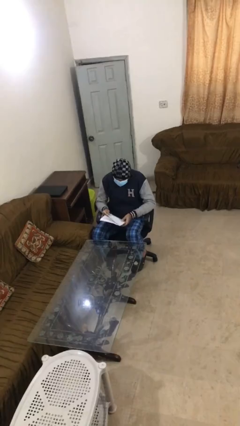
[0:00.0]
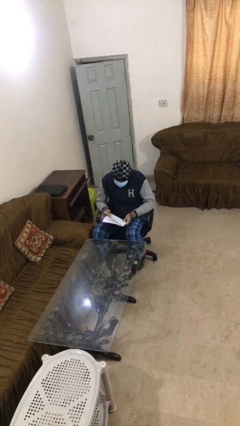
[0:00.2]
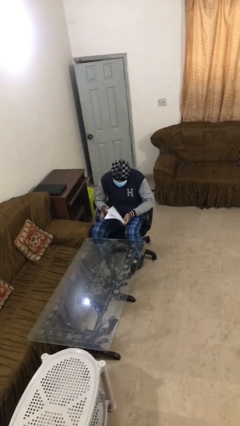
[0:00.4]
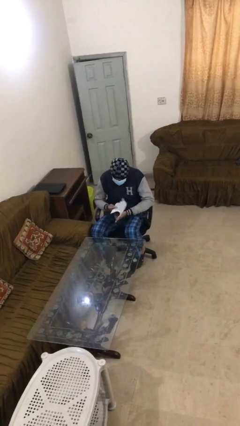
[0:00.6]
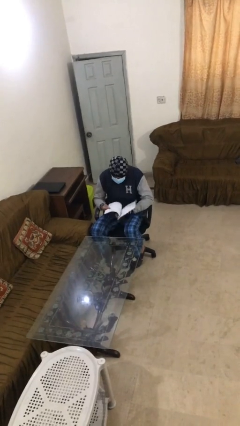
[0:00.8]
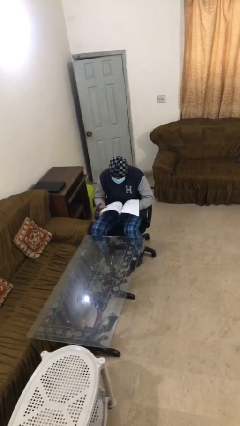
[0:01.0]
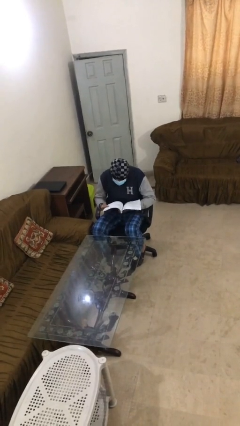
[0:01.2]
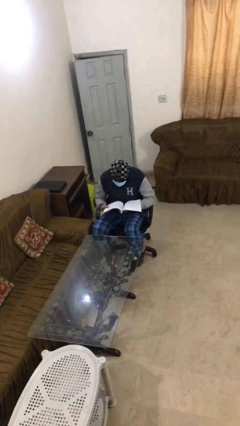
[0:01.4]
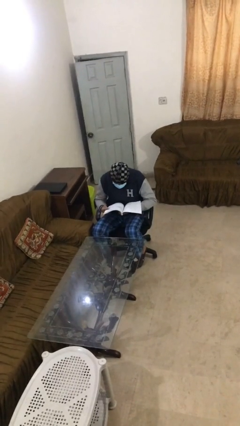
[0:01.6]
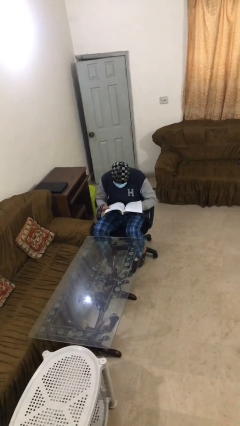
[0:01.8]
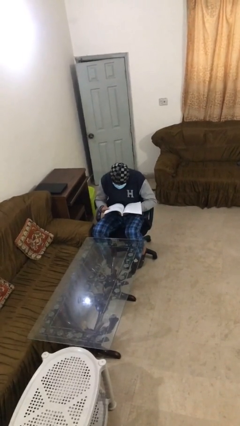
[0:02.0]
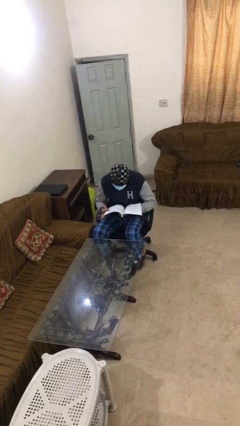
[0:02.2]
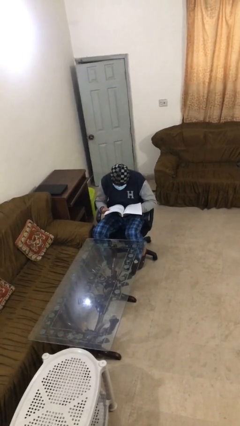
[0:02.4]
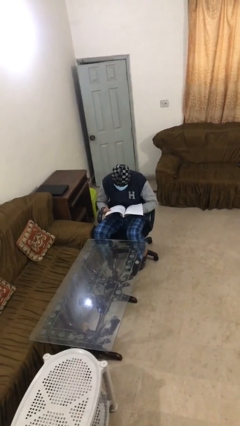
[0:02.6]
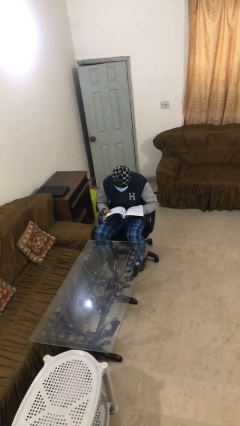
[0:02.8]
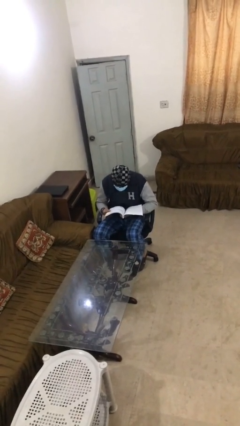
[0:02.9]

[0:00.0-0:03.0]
person reads document

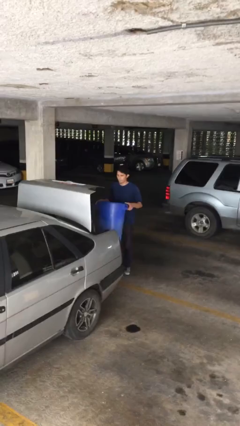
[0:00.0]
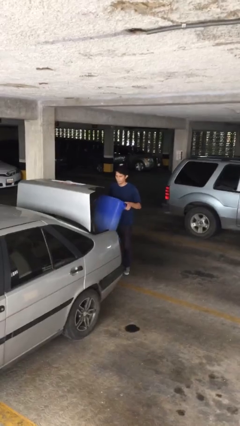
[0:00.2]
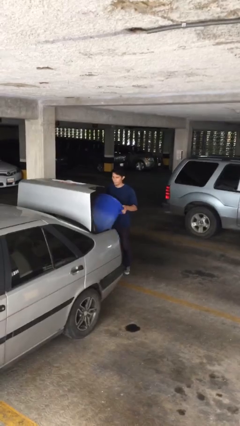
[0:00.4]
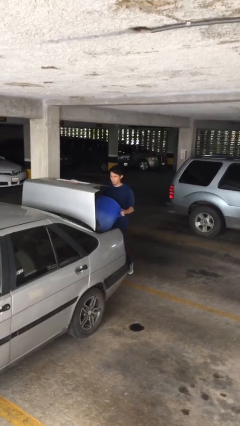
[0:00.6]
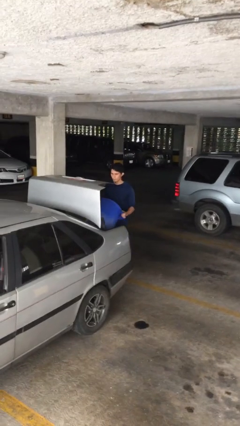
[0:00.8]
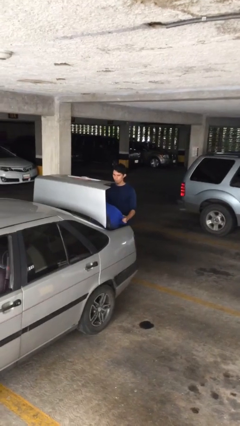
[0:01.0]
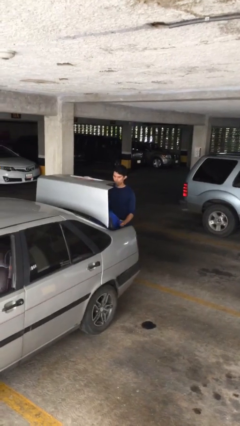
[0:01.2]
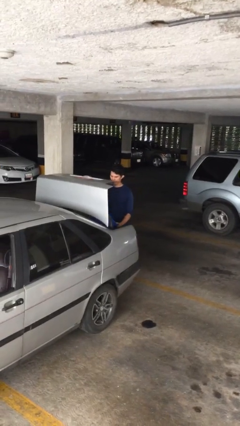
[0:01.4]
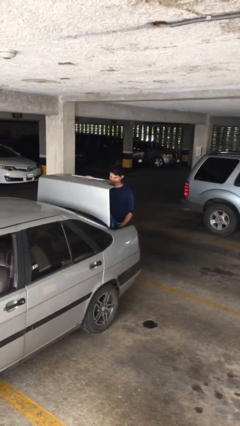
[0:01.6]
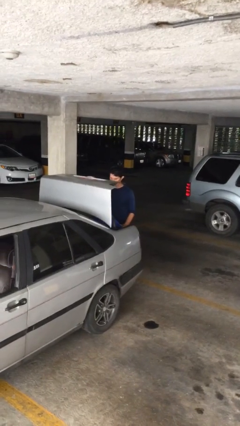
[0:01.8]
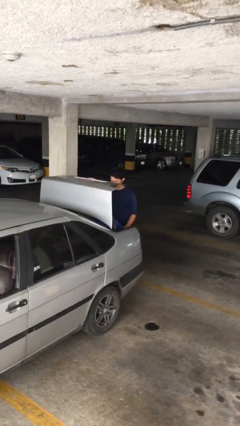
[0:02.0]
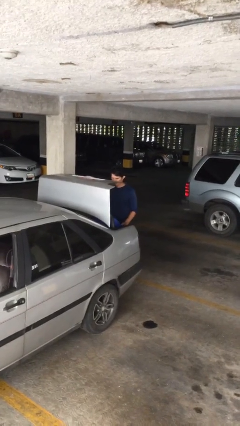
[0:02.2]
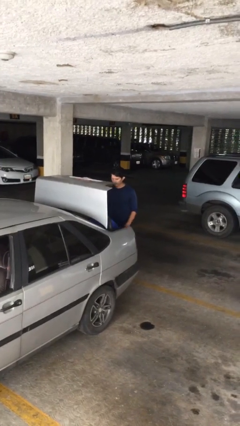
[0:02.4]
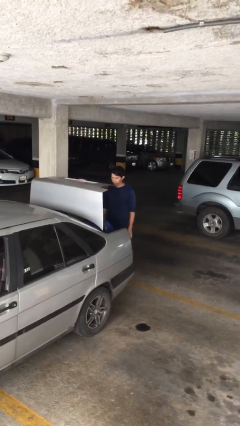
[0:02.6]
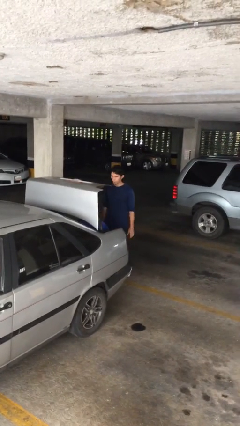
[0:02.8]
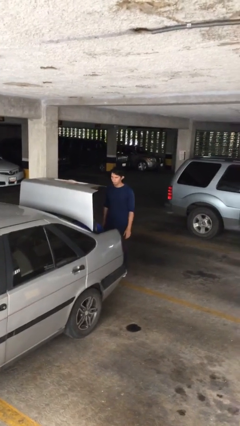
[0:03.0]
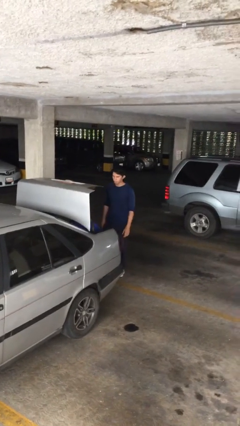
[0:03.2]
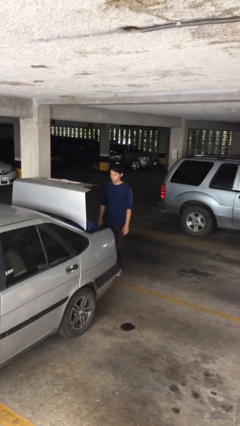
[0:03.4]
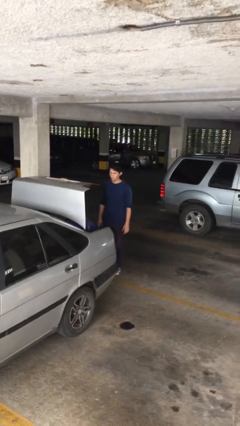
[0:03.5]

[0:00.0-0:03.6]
person loads car

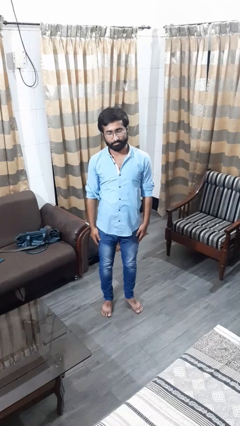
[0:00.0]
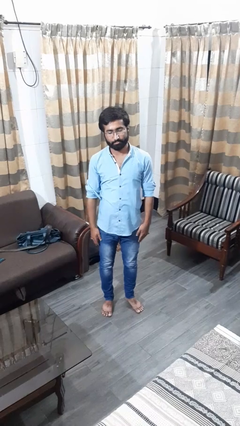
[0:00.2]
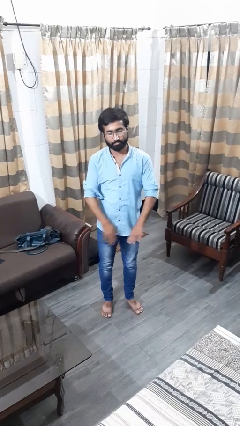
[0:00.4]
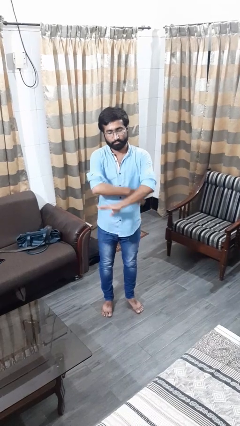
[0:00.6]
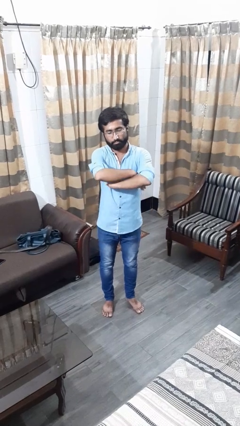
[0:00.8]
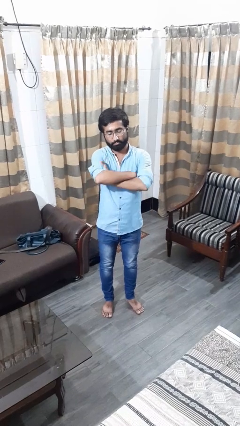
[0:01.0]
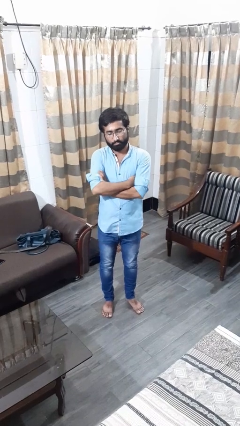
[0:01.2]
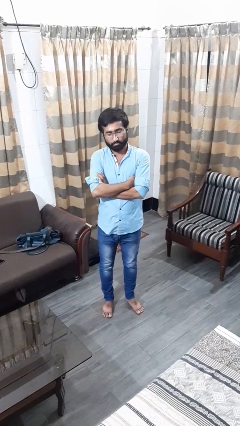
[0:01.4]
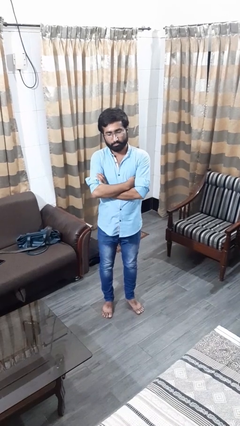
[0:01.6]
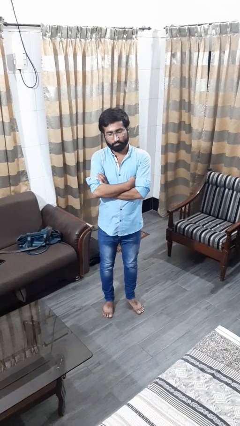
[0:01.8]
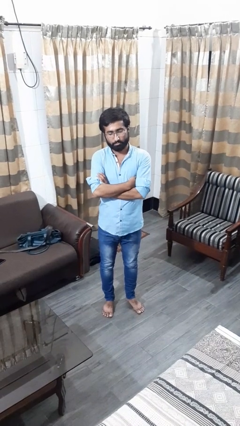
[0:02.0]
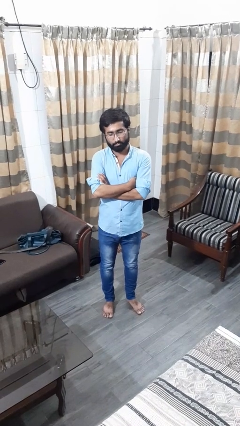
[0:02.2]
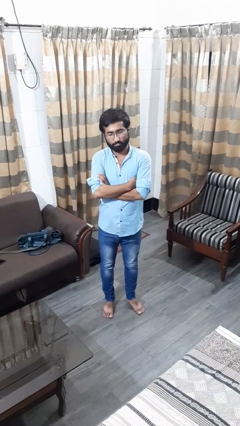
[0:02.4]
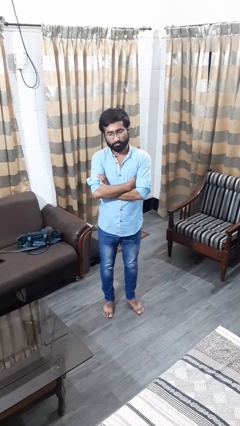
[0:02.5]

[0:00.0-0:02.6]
person crosses arms

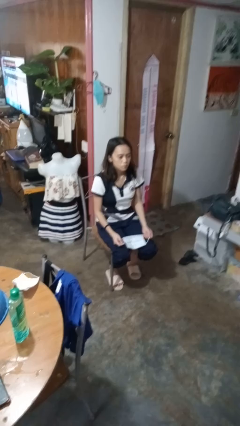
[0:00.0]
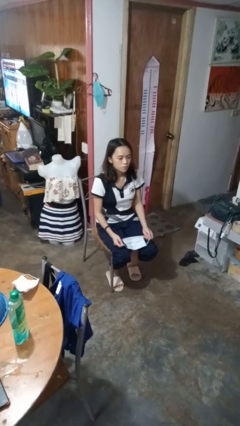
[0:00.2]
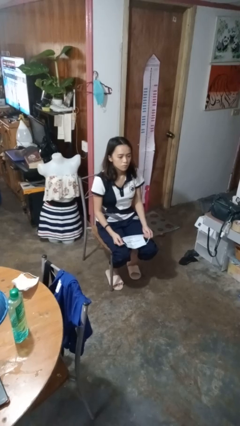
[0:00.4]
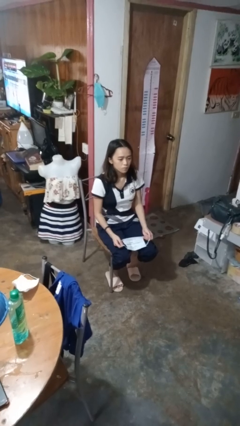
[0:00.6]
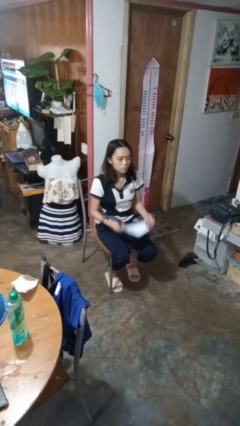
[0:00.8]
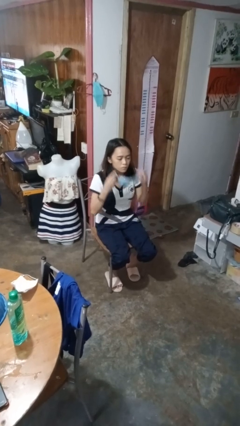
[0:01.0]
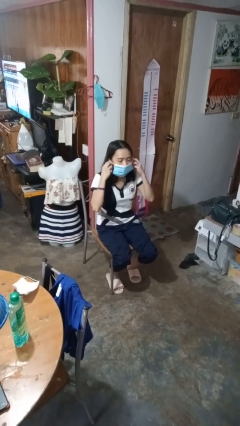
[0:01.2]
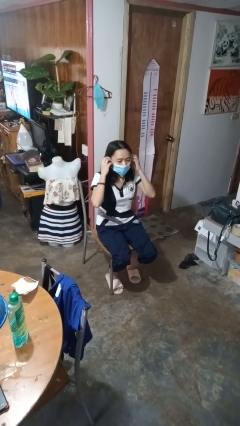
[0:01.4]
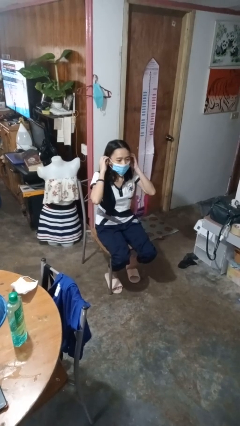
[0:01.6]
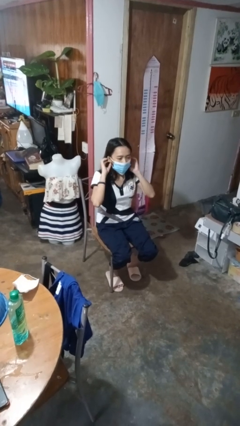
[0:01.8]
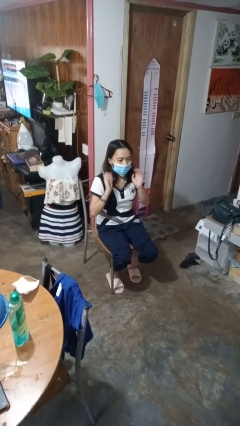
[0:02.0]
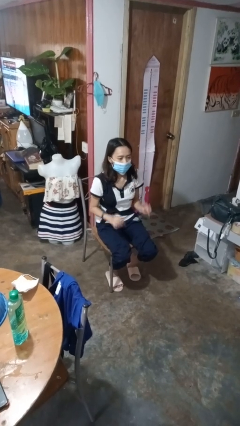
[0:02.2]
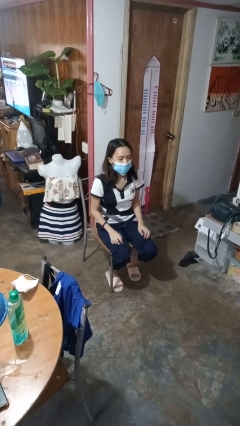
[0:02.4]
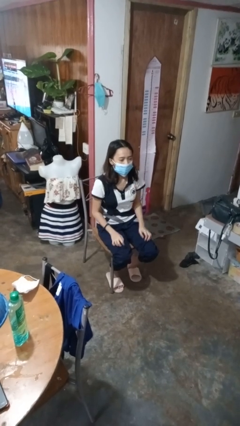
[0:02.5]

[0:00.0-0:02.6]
person puts on facemask

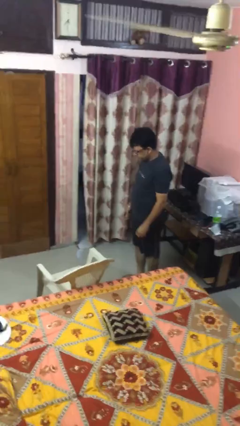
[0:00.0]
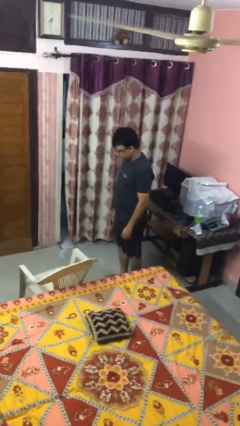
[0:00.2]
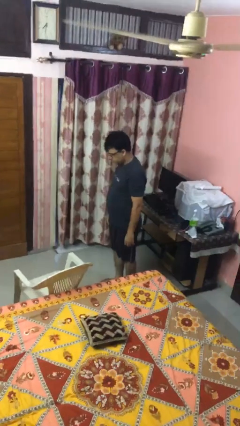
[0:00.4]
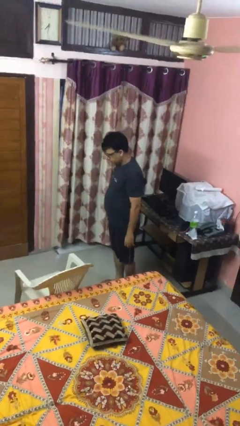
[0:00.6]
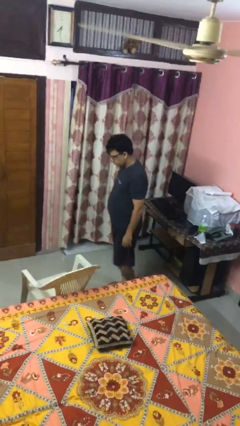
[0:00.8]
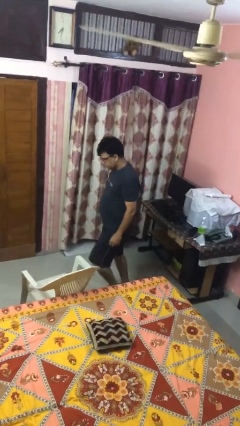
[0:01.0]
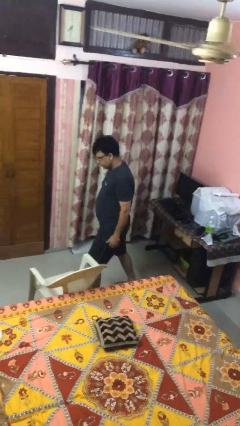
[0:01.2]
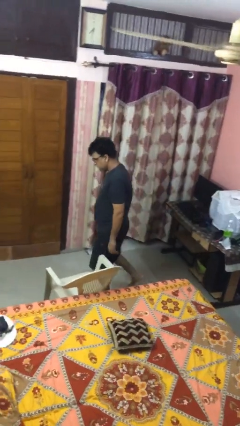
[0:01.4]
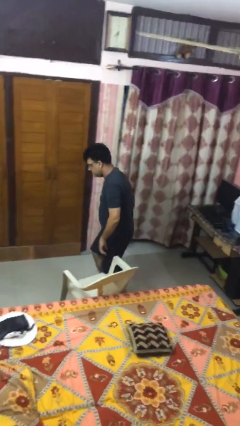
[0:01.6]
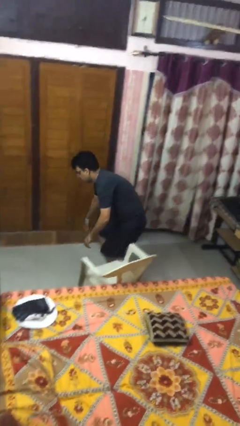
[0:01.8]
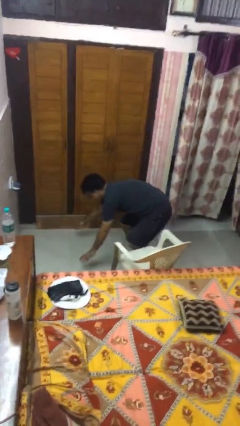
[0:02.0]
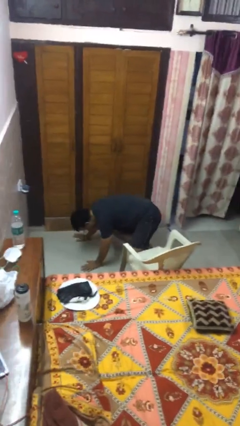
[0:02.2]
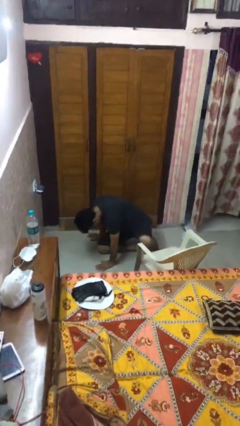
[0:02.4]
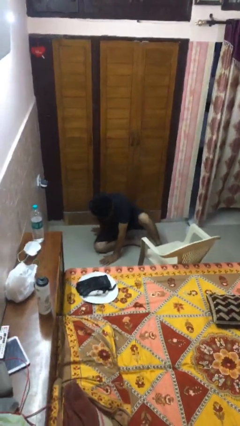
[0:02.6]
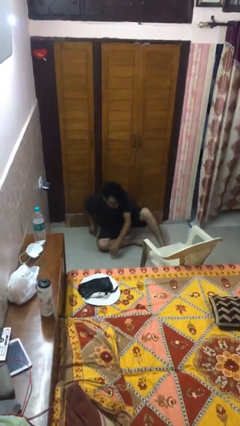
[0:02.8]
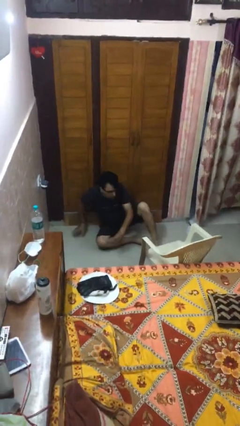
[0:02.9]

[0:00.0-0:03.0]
person trips on object on floor

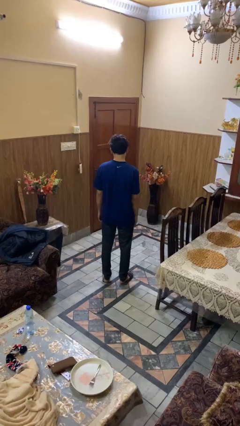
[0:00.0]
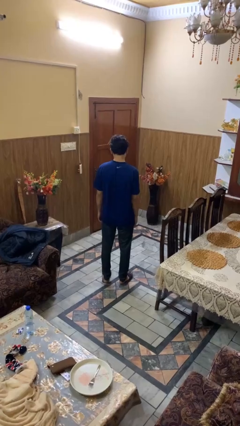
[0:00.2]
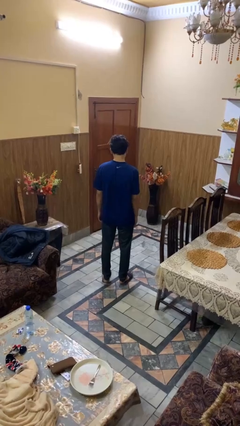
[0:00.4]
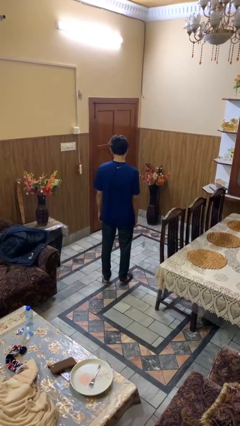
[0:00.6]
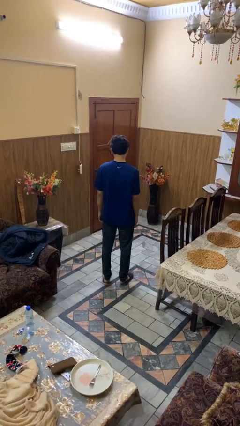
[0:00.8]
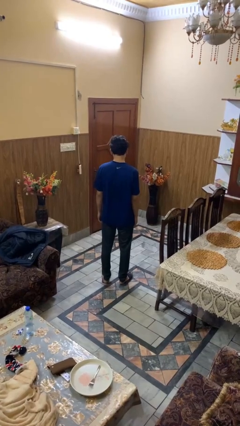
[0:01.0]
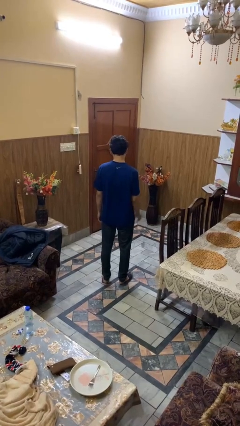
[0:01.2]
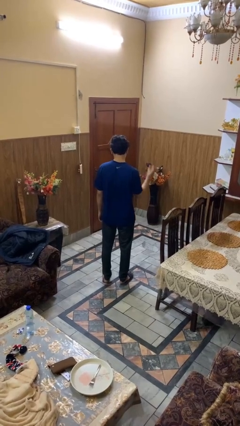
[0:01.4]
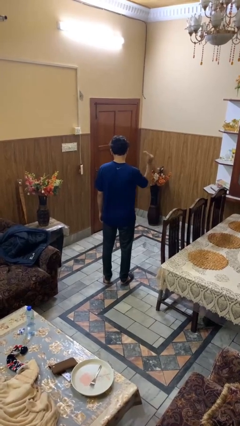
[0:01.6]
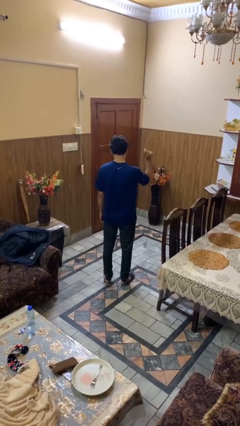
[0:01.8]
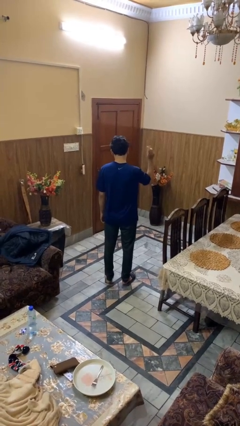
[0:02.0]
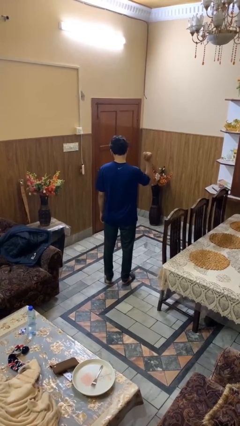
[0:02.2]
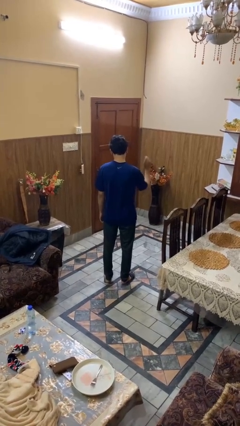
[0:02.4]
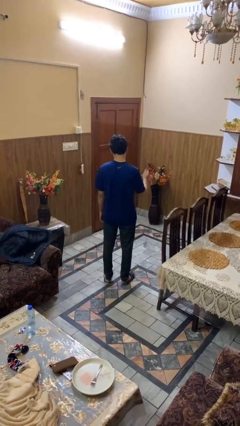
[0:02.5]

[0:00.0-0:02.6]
person snaps fingers

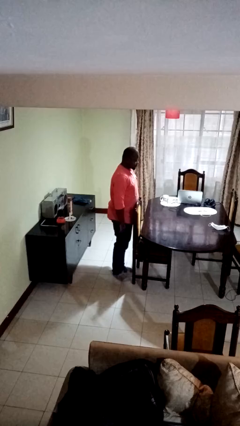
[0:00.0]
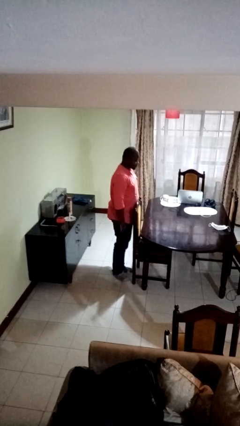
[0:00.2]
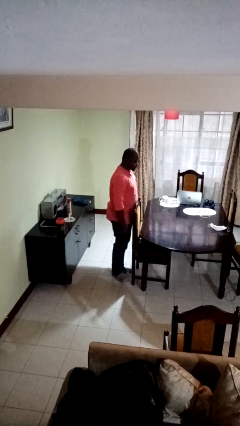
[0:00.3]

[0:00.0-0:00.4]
person pulls out chair
